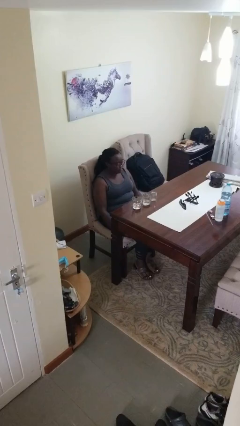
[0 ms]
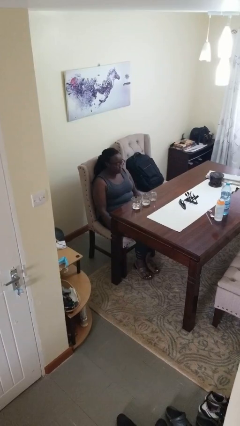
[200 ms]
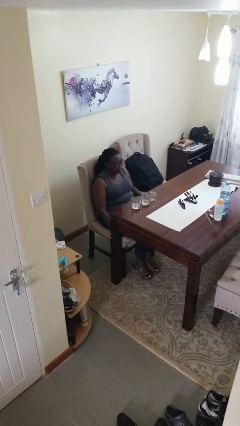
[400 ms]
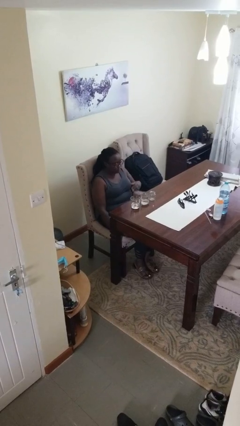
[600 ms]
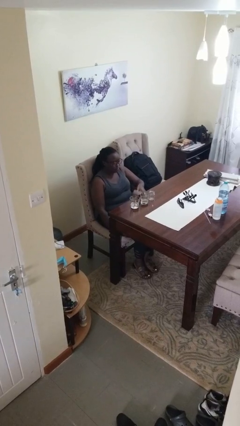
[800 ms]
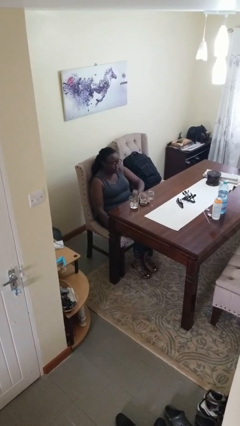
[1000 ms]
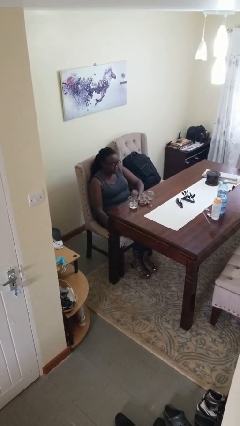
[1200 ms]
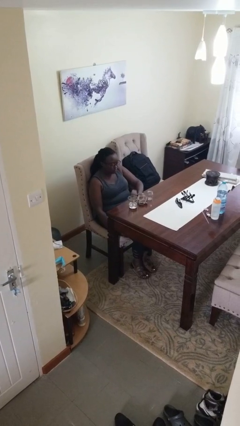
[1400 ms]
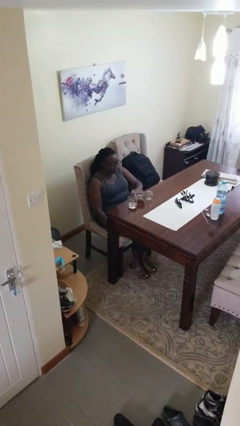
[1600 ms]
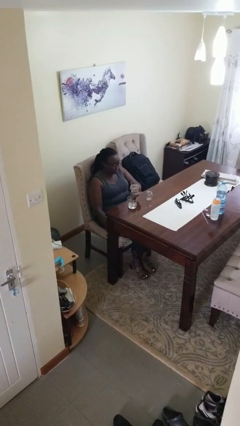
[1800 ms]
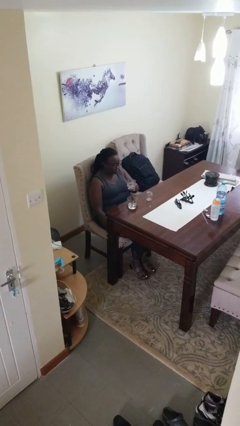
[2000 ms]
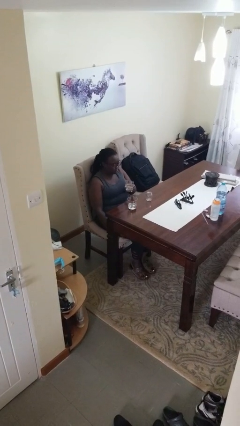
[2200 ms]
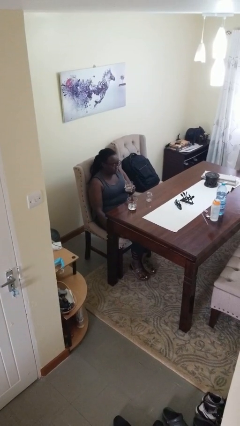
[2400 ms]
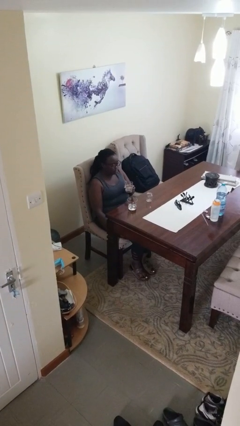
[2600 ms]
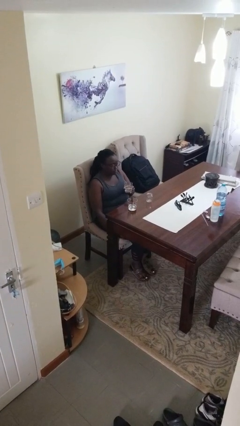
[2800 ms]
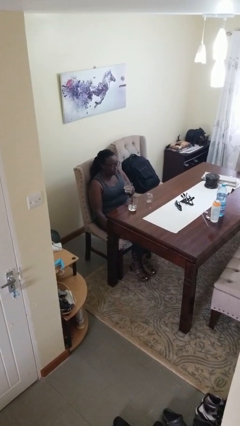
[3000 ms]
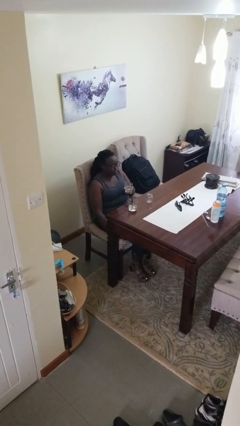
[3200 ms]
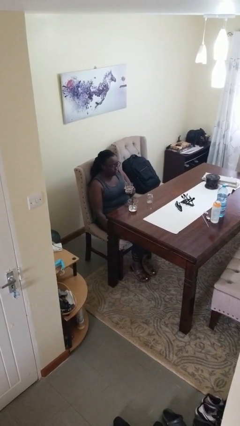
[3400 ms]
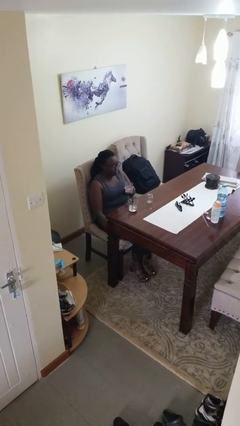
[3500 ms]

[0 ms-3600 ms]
person picks up object from table

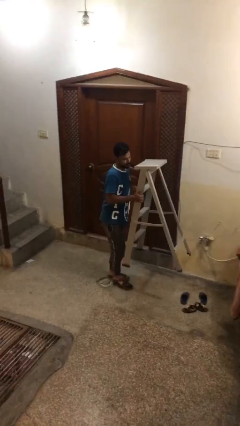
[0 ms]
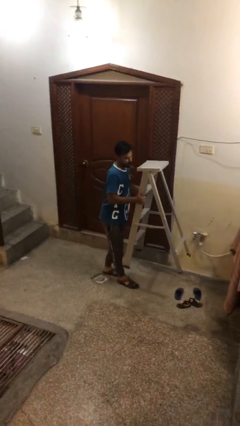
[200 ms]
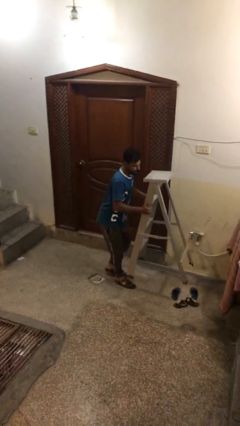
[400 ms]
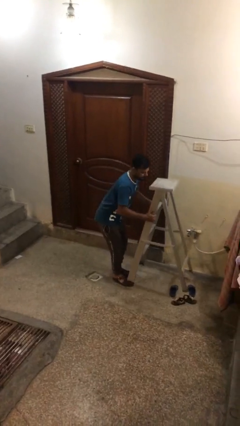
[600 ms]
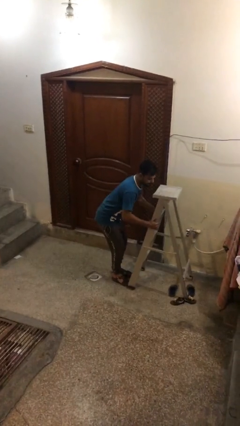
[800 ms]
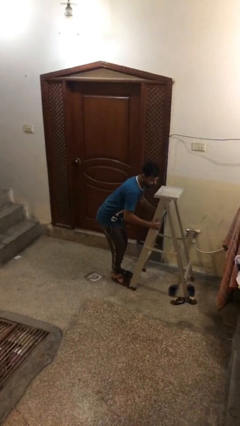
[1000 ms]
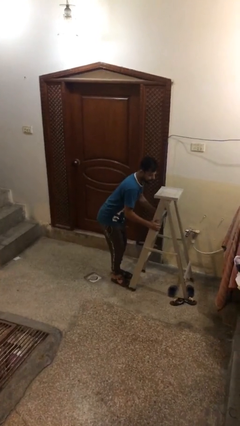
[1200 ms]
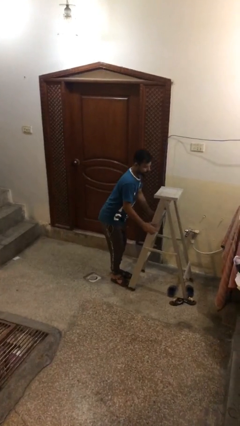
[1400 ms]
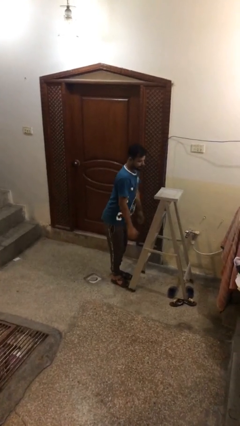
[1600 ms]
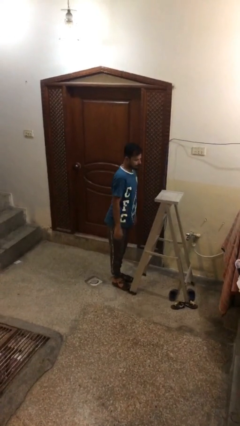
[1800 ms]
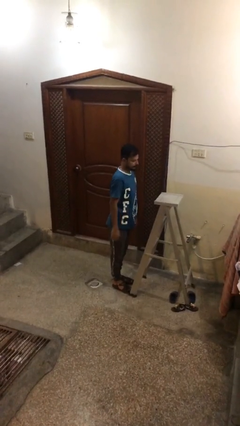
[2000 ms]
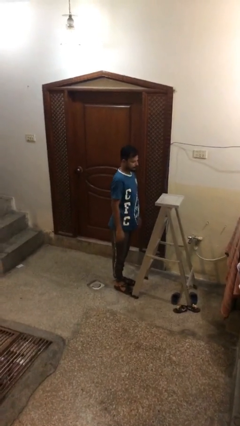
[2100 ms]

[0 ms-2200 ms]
person puts down object on floor

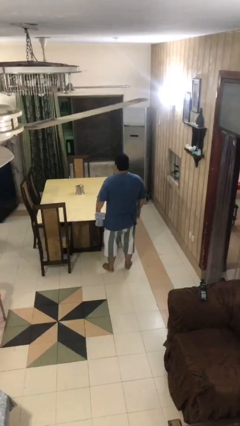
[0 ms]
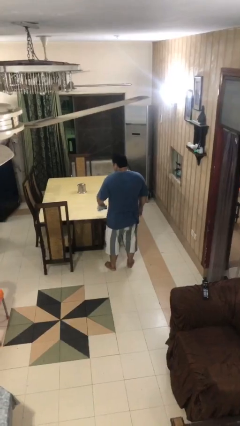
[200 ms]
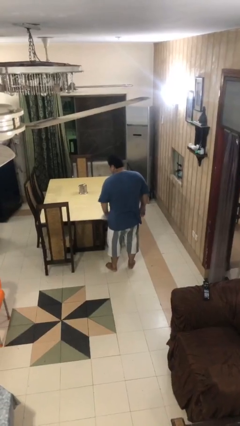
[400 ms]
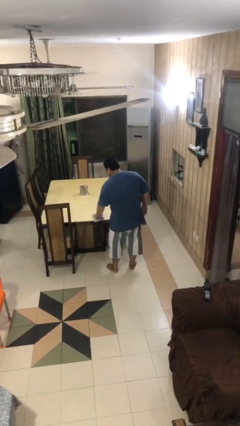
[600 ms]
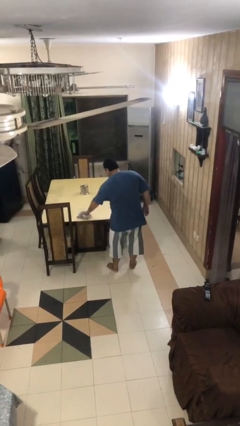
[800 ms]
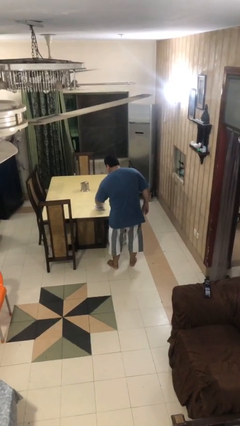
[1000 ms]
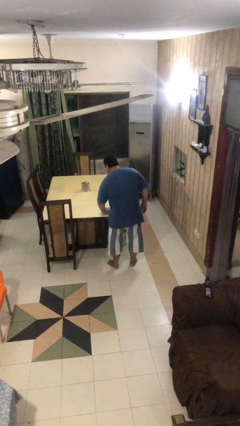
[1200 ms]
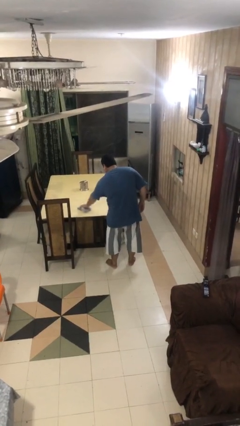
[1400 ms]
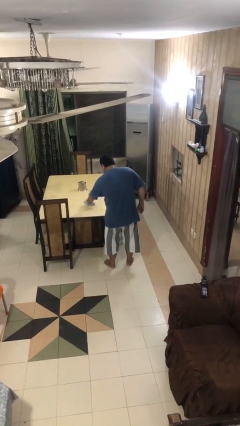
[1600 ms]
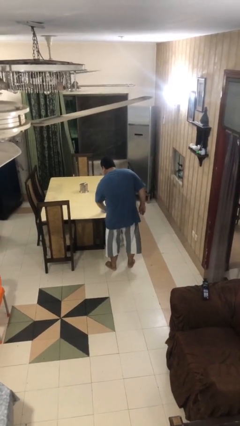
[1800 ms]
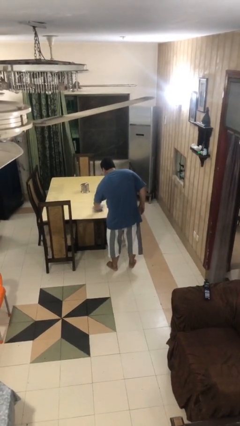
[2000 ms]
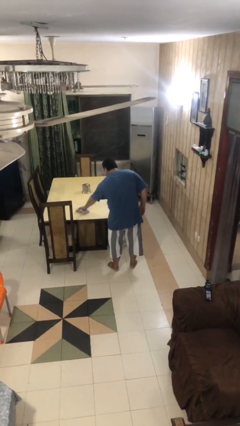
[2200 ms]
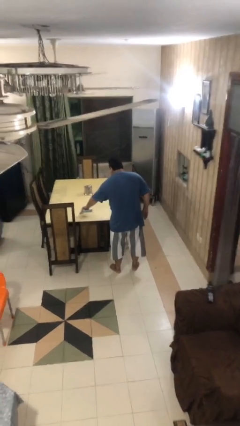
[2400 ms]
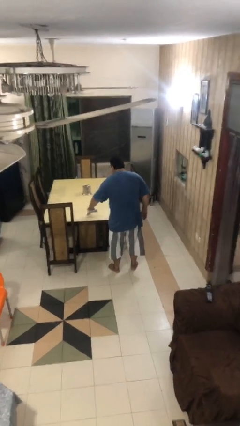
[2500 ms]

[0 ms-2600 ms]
person cleans table with rag

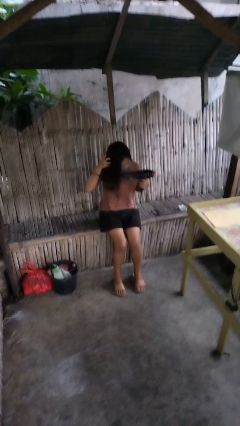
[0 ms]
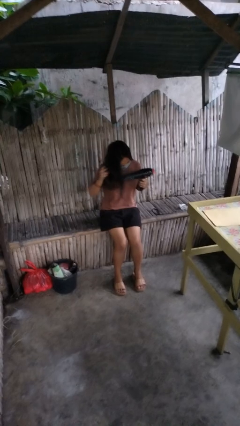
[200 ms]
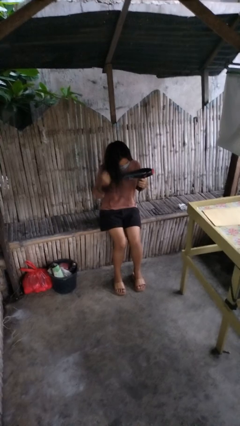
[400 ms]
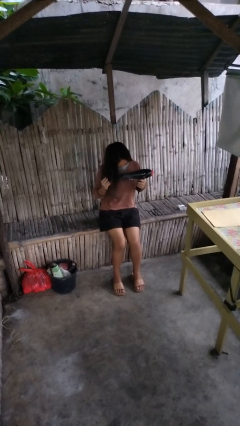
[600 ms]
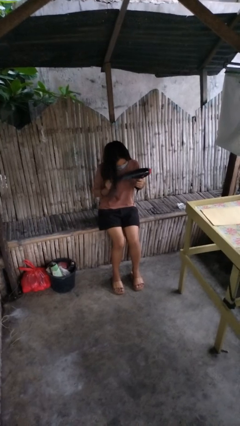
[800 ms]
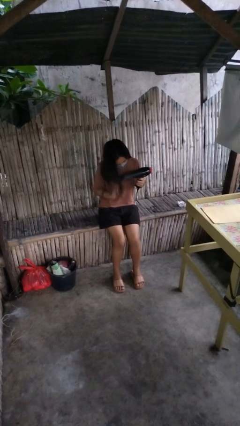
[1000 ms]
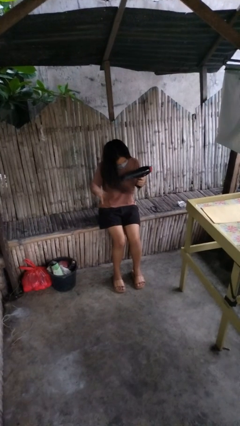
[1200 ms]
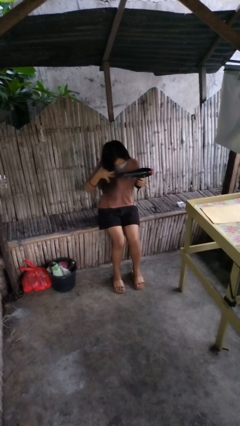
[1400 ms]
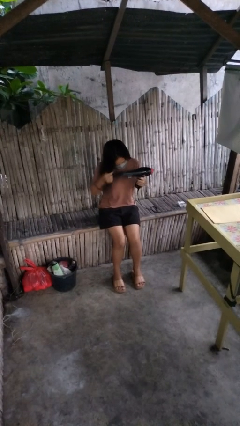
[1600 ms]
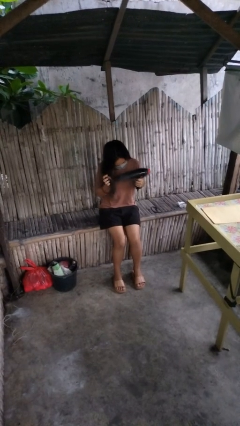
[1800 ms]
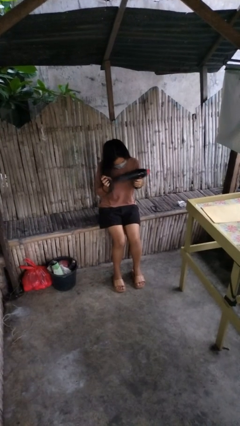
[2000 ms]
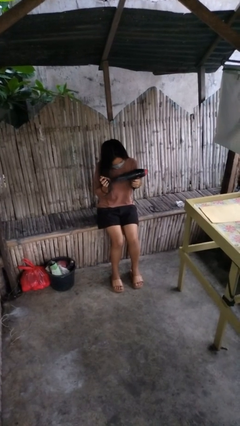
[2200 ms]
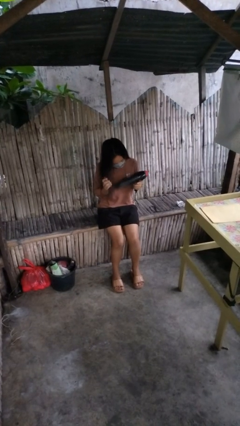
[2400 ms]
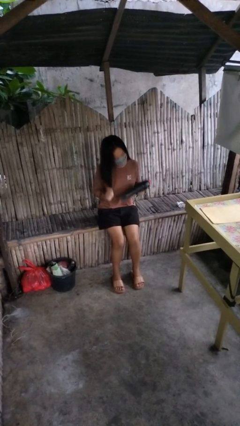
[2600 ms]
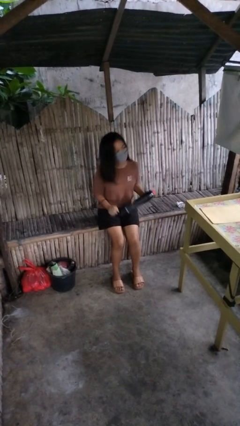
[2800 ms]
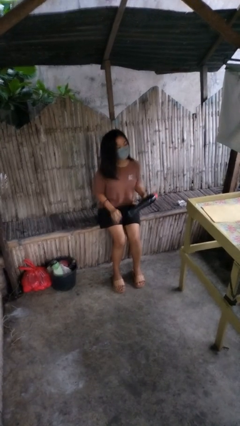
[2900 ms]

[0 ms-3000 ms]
person dries hair with hairdryer

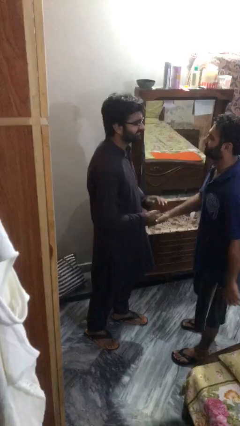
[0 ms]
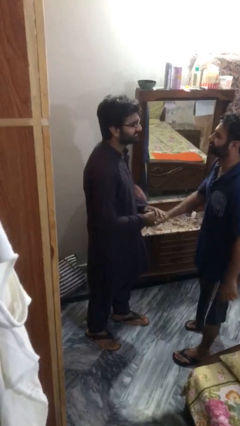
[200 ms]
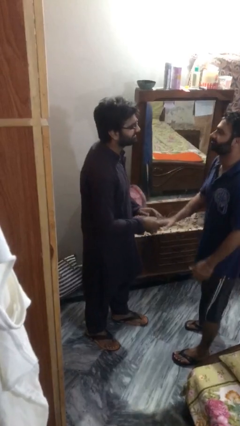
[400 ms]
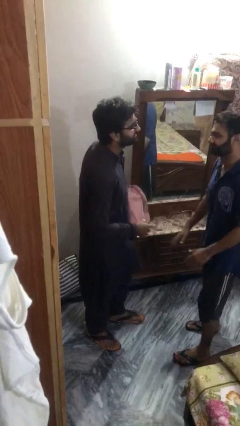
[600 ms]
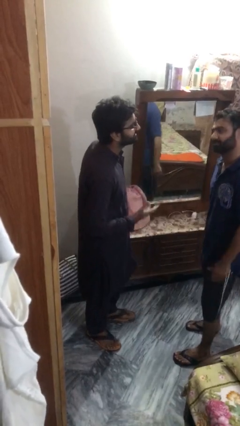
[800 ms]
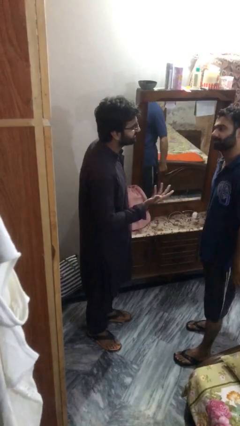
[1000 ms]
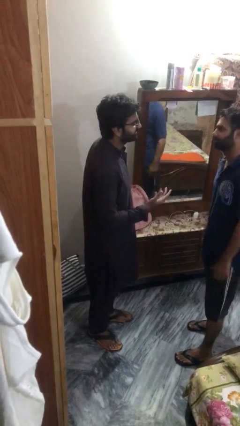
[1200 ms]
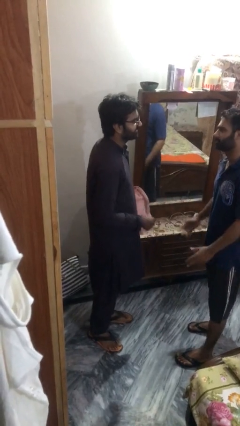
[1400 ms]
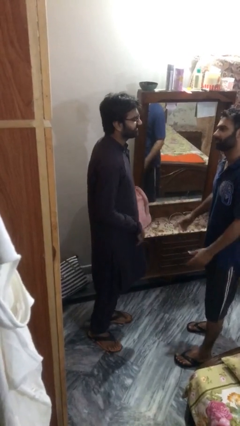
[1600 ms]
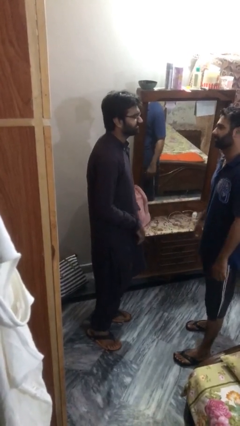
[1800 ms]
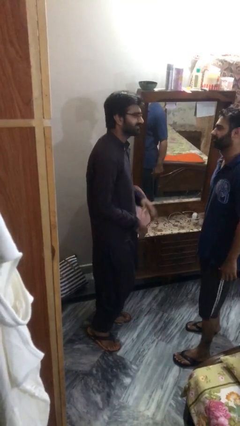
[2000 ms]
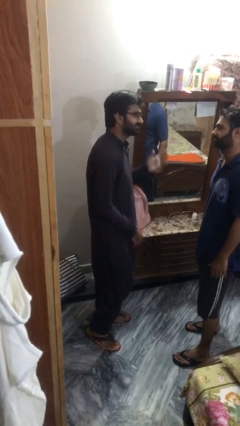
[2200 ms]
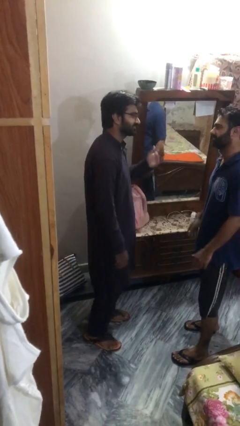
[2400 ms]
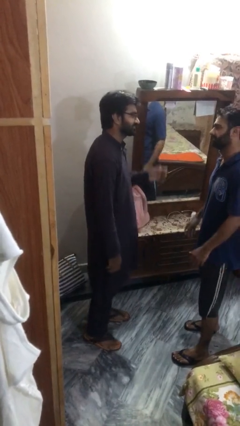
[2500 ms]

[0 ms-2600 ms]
person talks to person

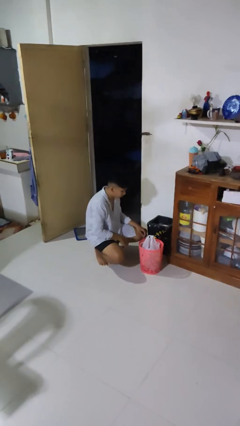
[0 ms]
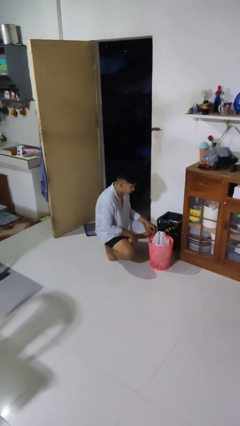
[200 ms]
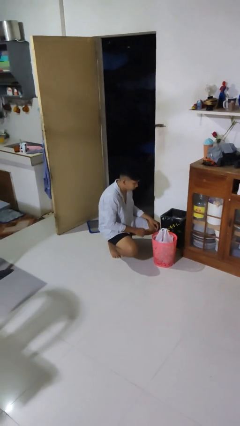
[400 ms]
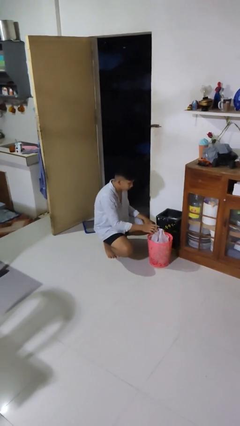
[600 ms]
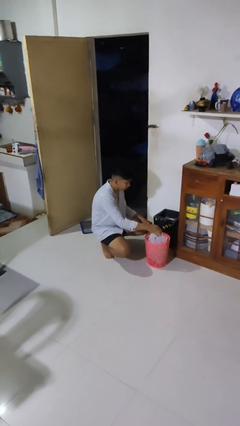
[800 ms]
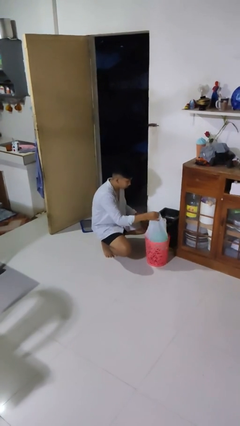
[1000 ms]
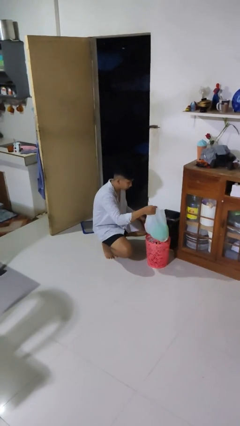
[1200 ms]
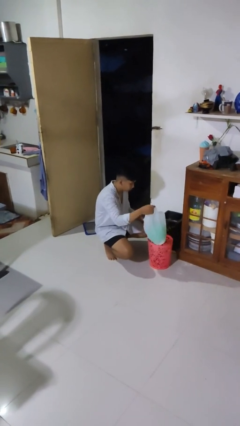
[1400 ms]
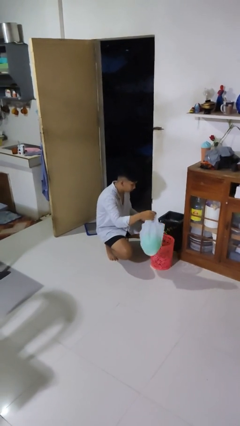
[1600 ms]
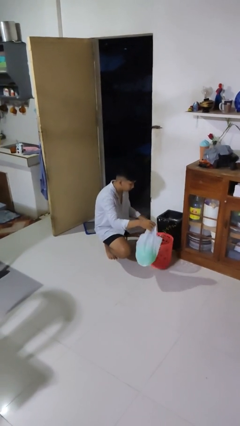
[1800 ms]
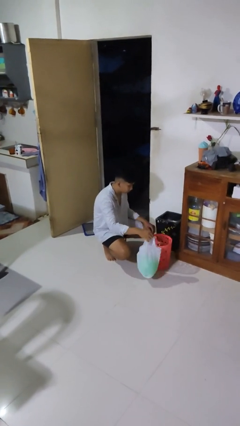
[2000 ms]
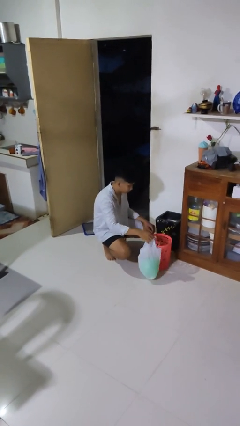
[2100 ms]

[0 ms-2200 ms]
person removes trashbag from trashcan

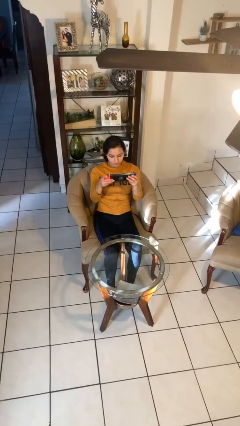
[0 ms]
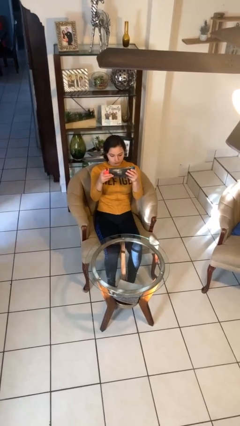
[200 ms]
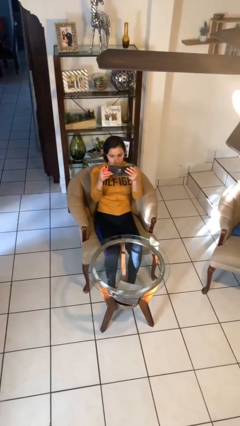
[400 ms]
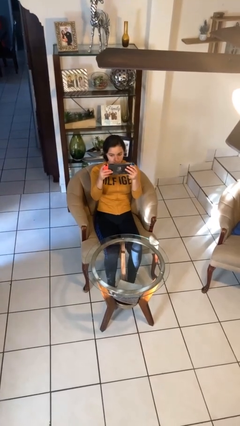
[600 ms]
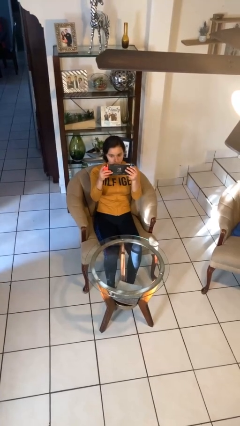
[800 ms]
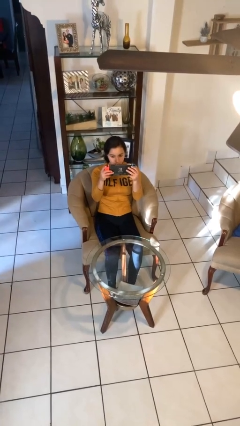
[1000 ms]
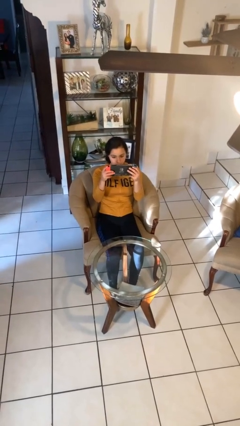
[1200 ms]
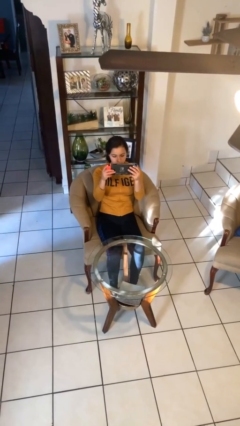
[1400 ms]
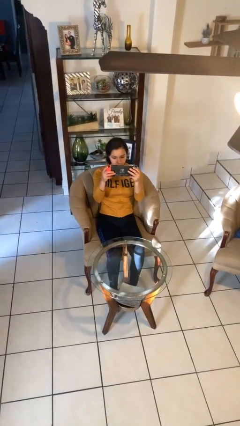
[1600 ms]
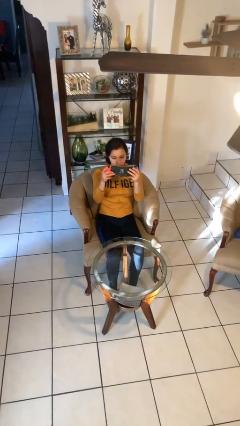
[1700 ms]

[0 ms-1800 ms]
person interacts with handheld game
